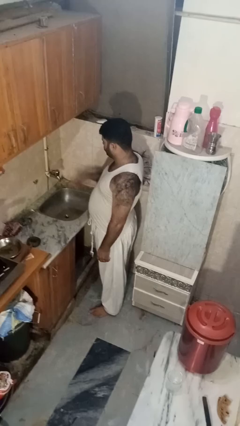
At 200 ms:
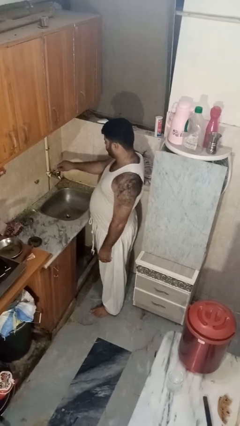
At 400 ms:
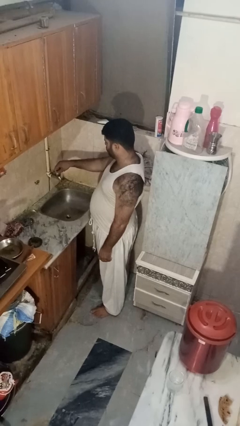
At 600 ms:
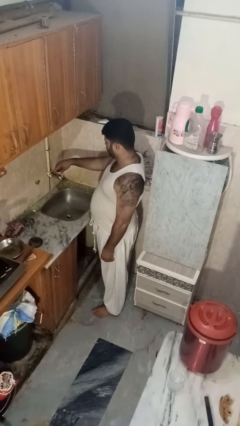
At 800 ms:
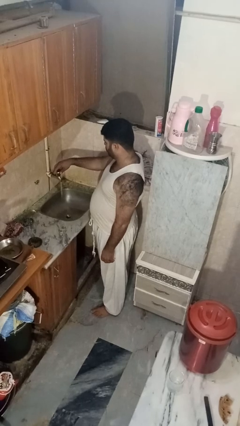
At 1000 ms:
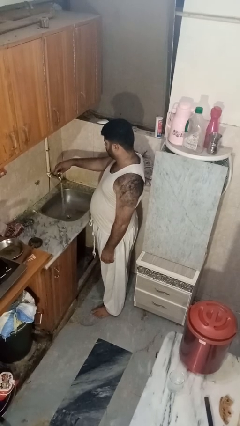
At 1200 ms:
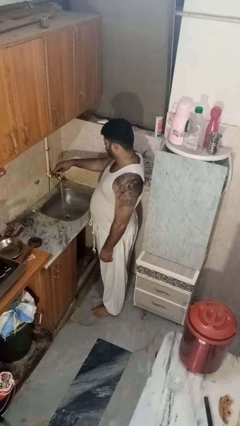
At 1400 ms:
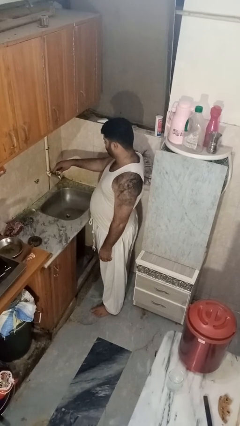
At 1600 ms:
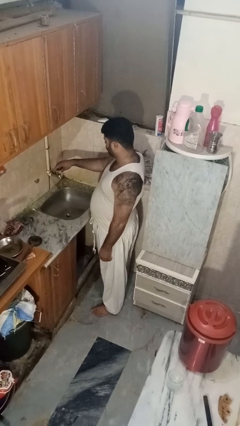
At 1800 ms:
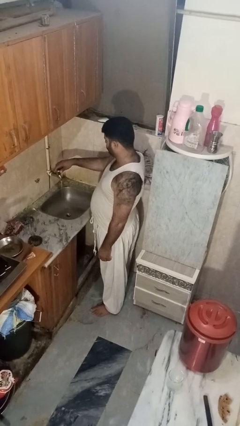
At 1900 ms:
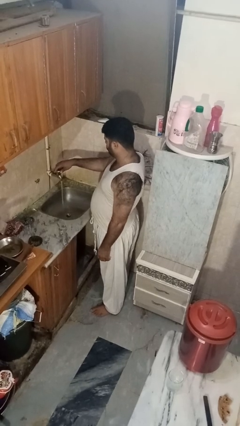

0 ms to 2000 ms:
person turns on faucet

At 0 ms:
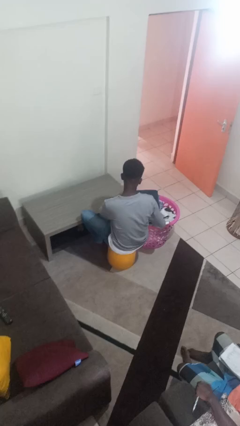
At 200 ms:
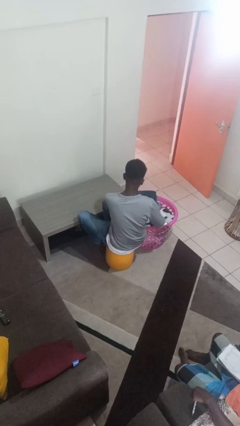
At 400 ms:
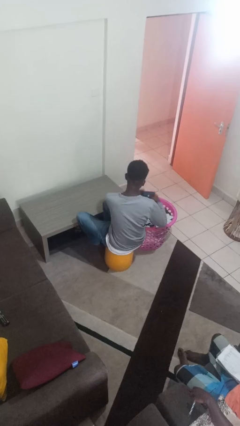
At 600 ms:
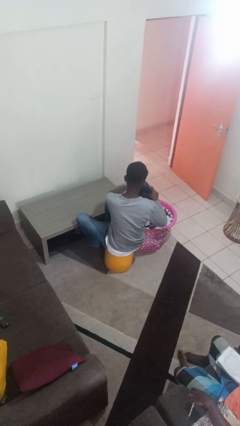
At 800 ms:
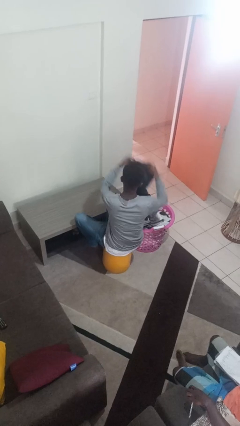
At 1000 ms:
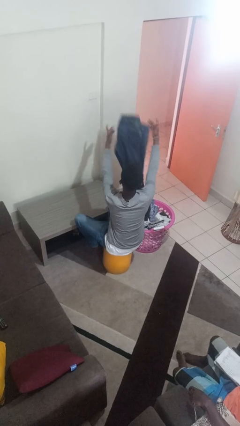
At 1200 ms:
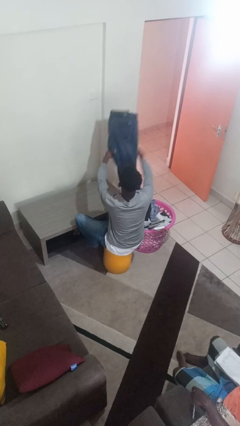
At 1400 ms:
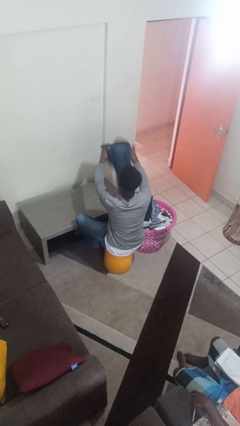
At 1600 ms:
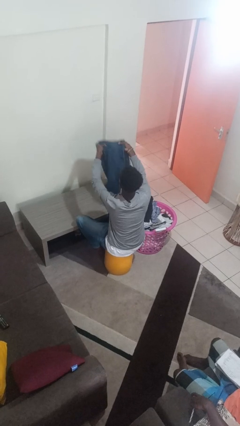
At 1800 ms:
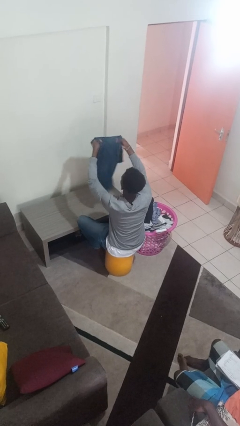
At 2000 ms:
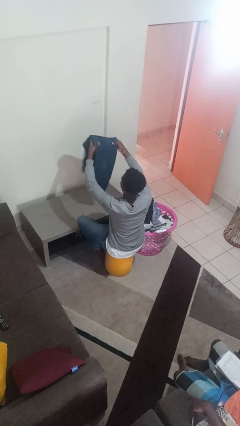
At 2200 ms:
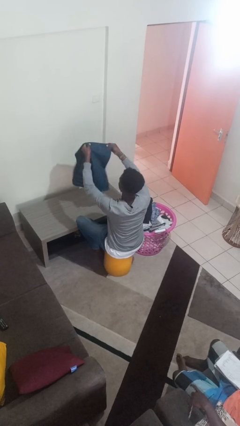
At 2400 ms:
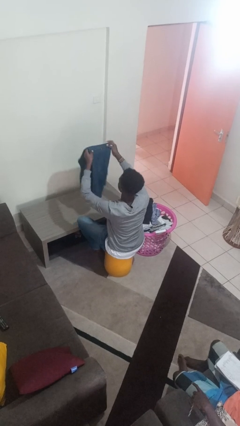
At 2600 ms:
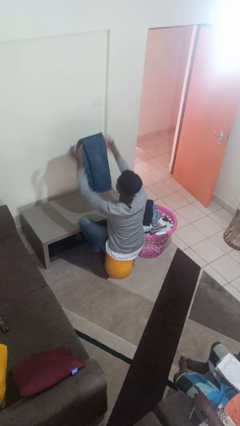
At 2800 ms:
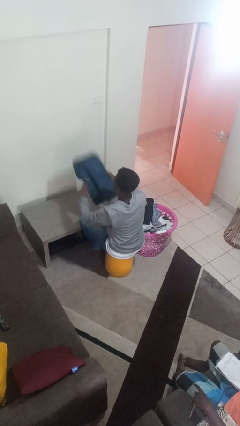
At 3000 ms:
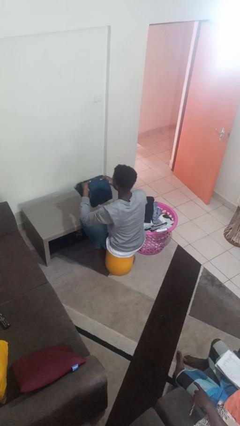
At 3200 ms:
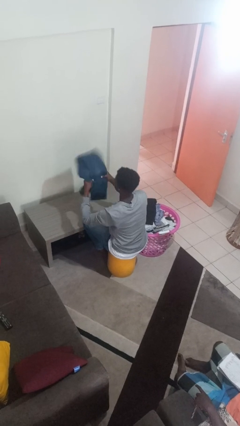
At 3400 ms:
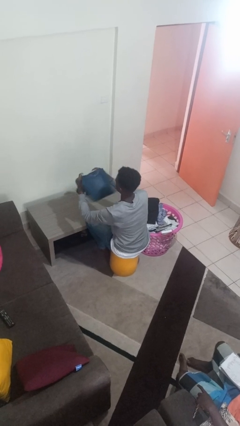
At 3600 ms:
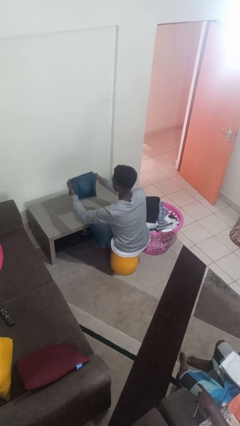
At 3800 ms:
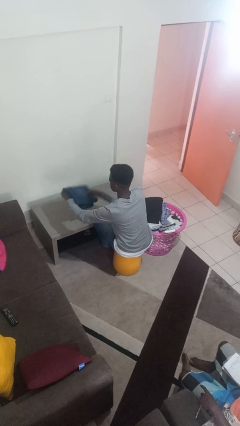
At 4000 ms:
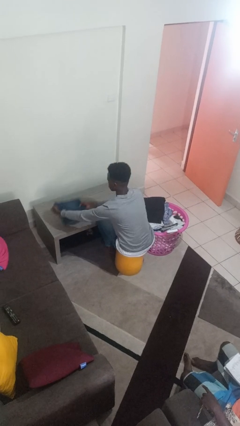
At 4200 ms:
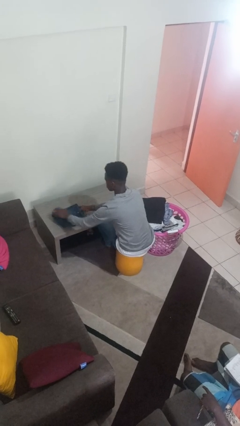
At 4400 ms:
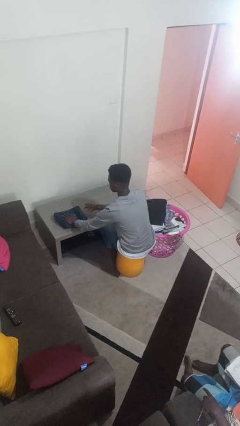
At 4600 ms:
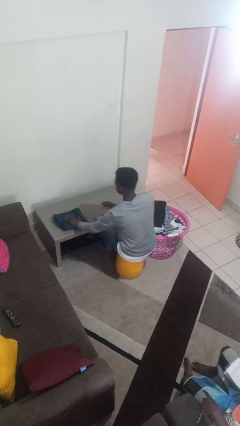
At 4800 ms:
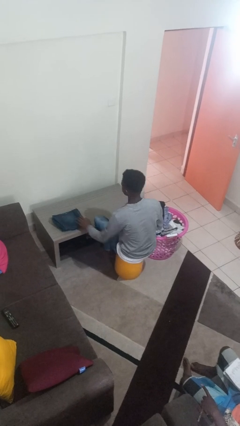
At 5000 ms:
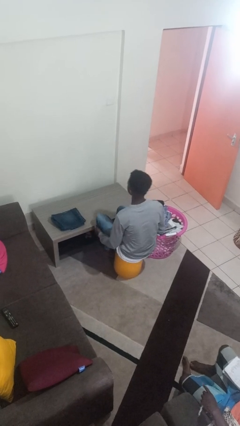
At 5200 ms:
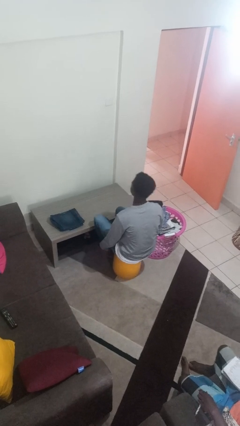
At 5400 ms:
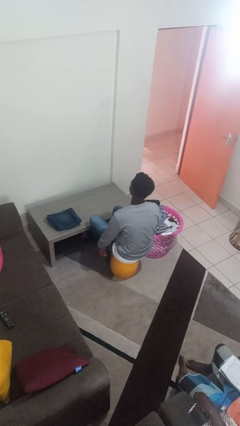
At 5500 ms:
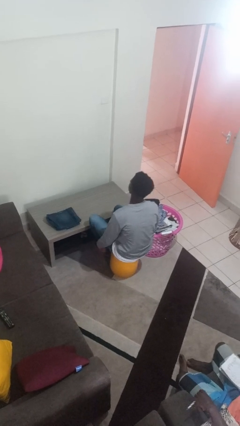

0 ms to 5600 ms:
person folds pants

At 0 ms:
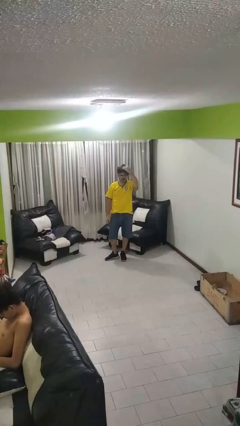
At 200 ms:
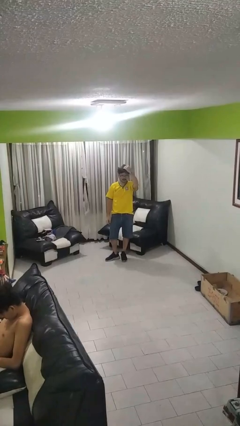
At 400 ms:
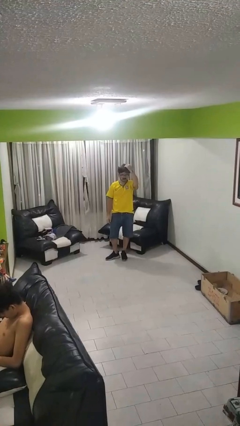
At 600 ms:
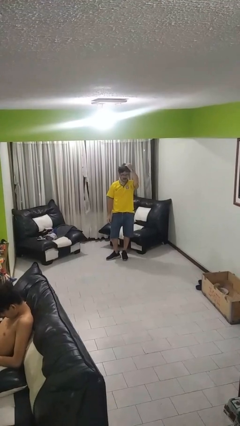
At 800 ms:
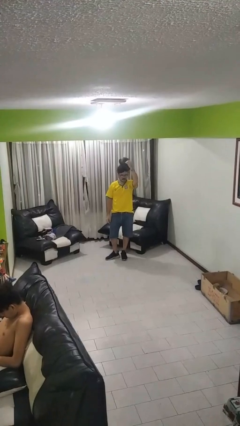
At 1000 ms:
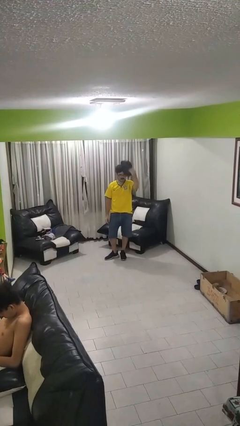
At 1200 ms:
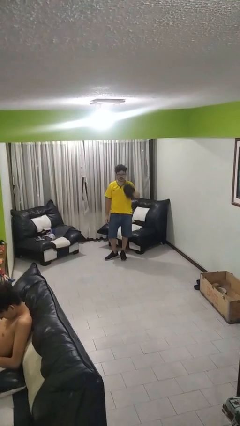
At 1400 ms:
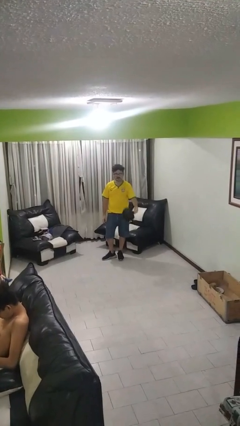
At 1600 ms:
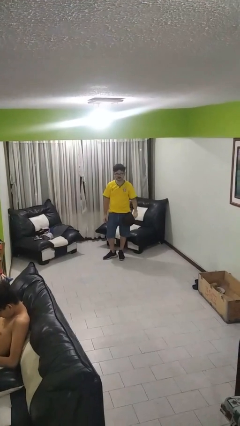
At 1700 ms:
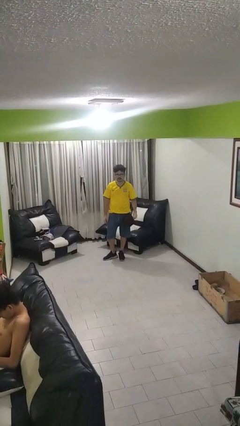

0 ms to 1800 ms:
person takes off hat

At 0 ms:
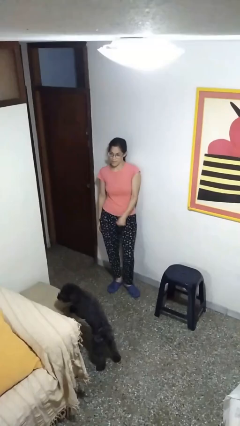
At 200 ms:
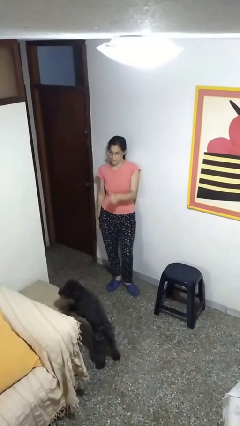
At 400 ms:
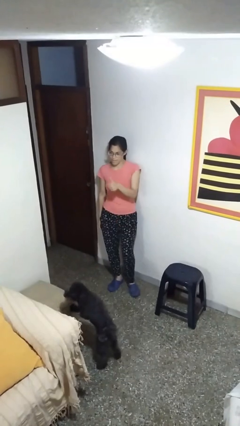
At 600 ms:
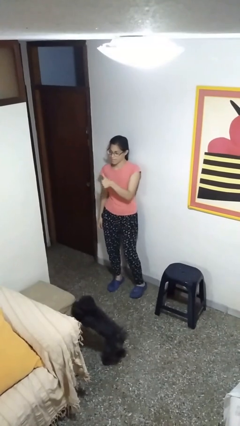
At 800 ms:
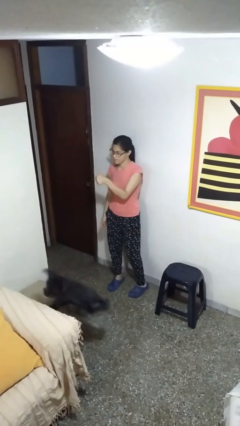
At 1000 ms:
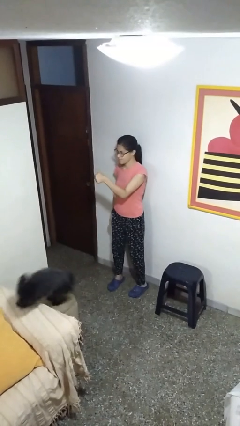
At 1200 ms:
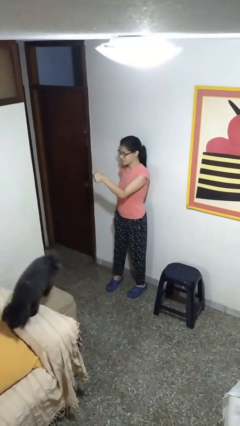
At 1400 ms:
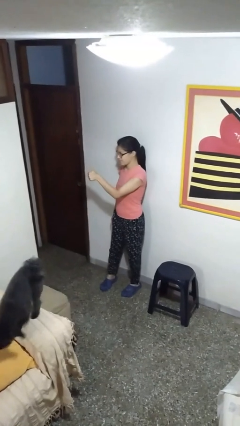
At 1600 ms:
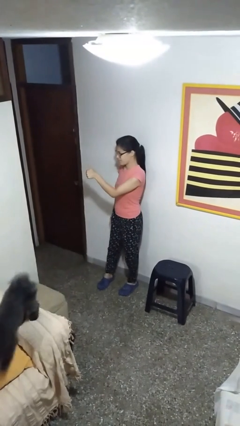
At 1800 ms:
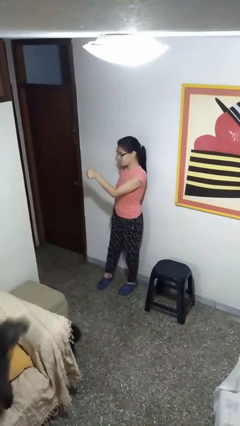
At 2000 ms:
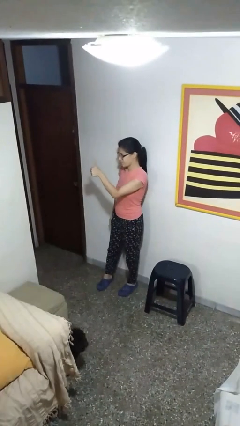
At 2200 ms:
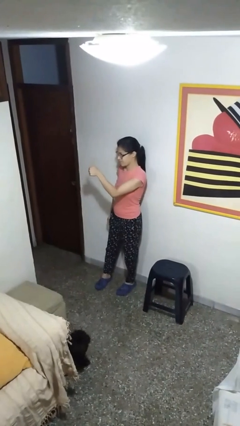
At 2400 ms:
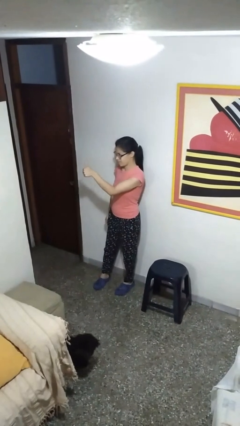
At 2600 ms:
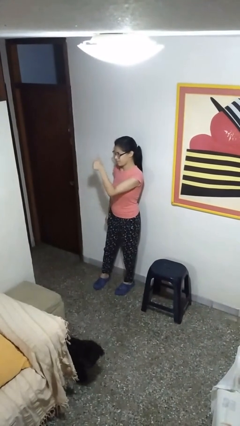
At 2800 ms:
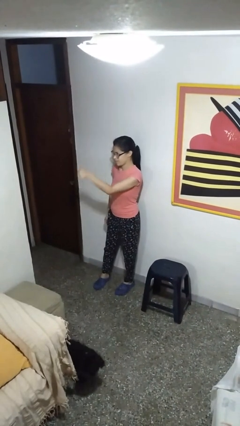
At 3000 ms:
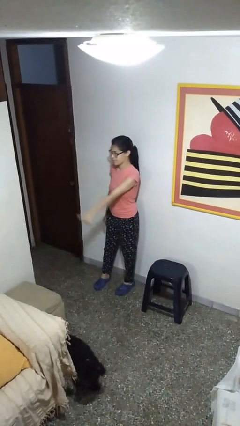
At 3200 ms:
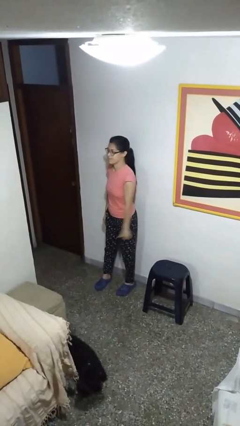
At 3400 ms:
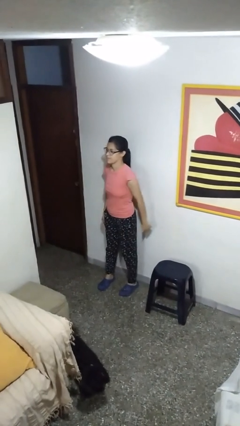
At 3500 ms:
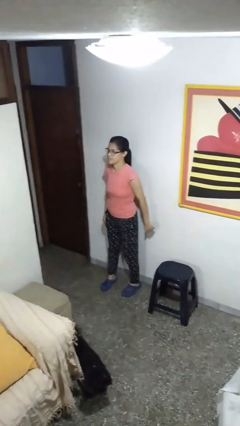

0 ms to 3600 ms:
person gestures thumbs up

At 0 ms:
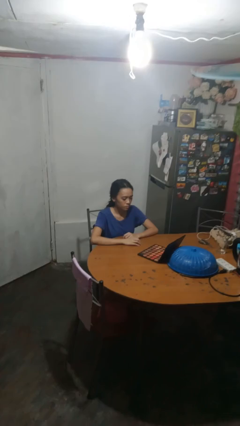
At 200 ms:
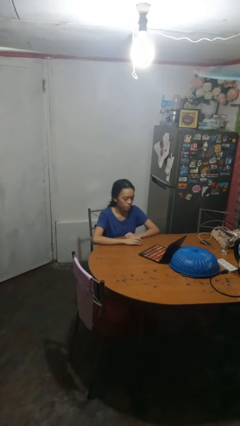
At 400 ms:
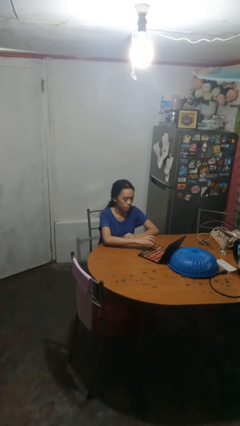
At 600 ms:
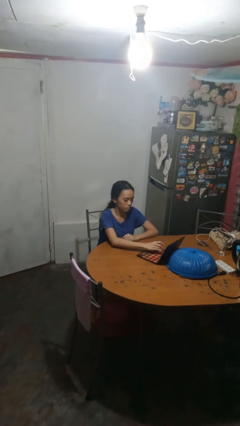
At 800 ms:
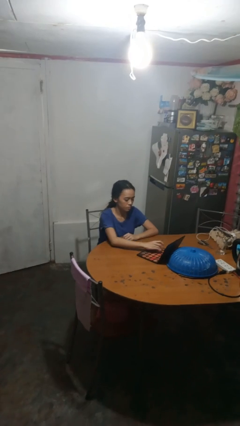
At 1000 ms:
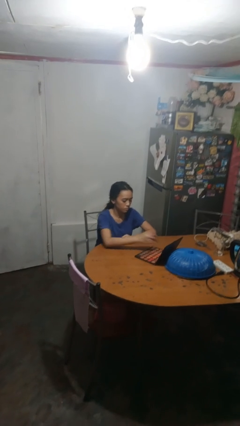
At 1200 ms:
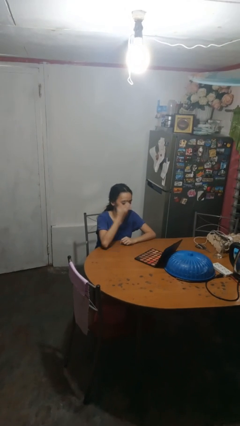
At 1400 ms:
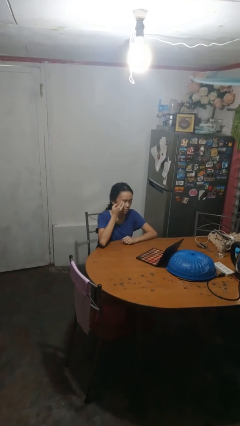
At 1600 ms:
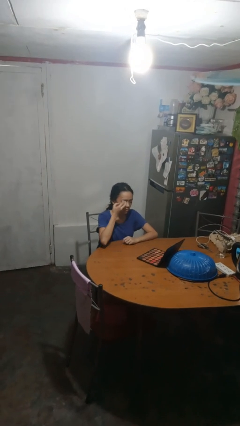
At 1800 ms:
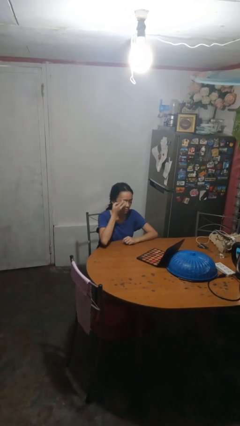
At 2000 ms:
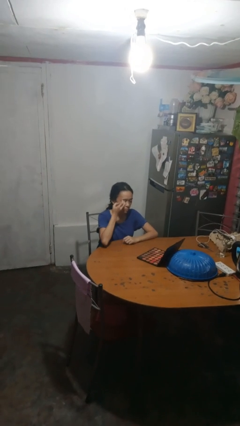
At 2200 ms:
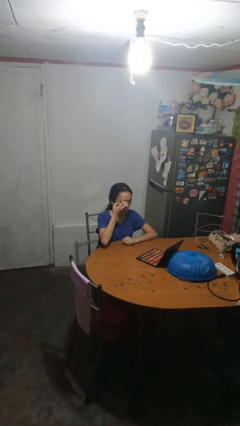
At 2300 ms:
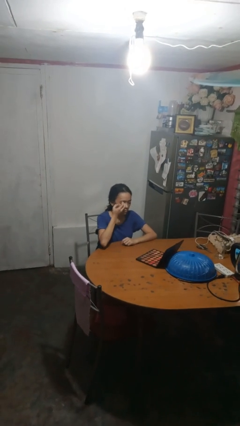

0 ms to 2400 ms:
person applies eye makeup

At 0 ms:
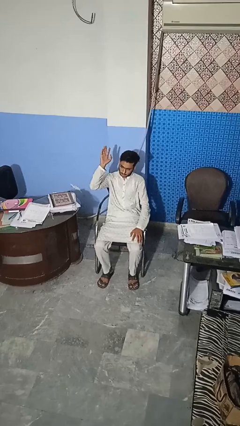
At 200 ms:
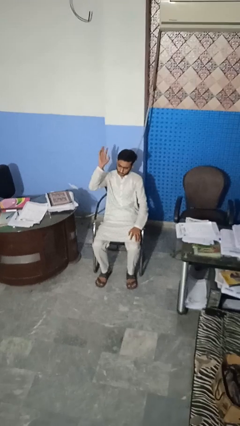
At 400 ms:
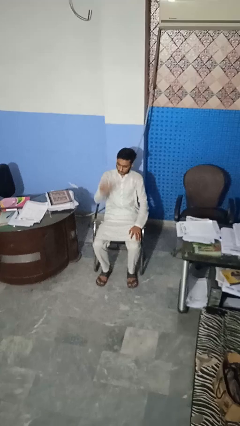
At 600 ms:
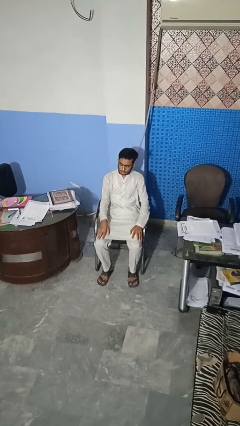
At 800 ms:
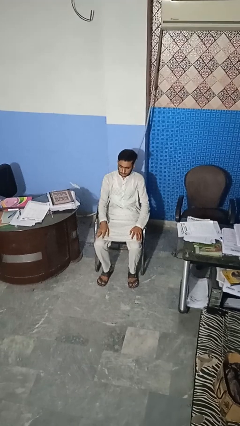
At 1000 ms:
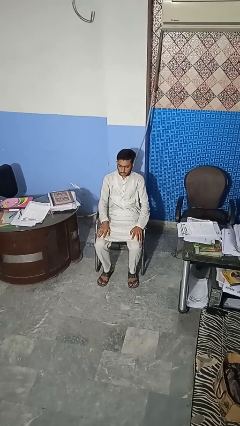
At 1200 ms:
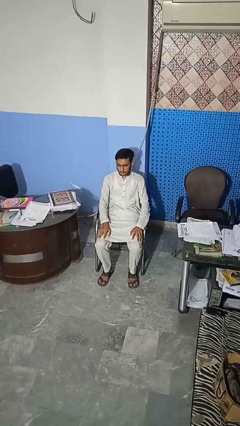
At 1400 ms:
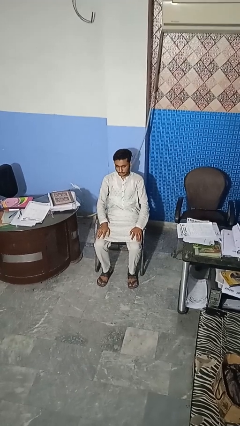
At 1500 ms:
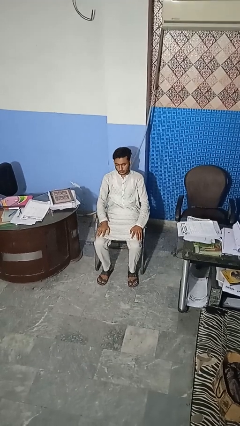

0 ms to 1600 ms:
person gestures lower hand

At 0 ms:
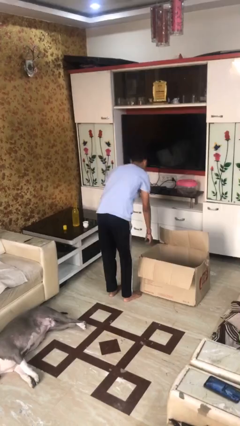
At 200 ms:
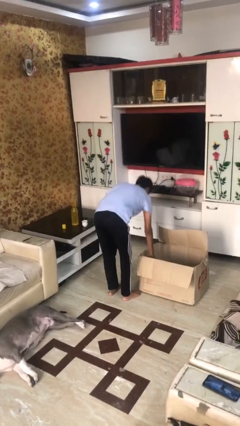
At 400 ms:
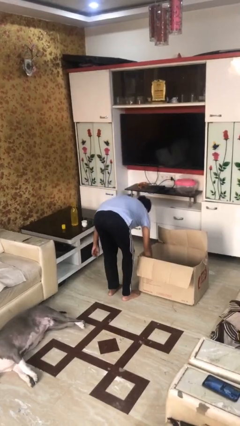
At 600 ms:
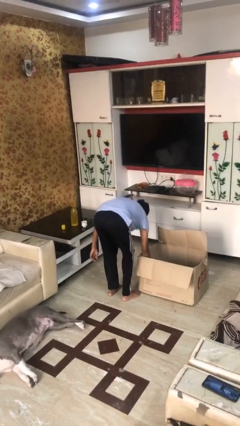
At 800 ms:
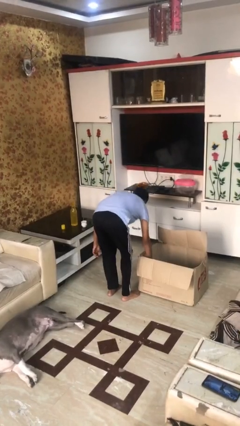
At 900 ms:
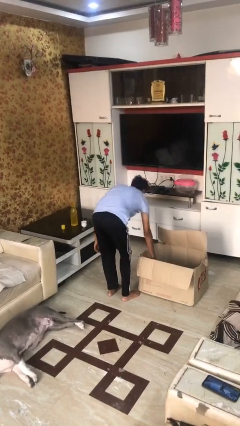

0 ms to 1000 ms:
person takes object from box
